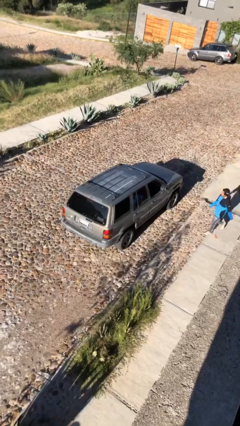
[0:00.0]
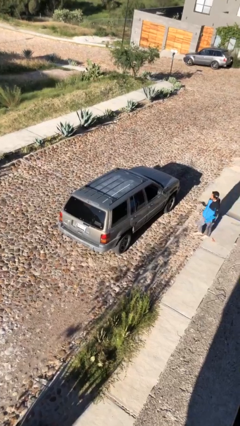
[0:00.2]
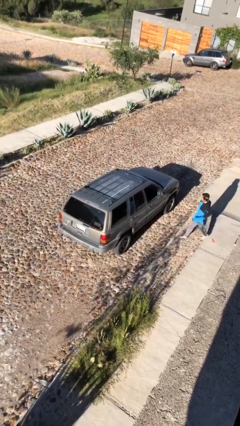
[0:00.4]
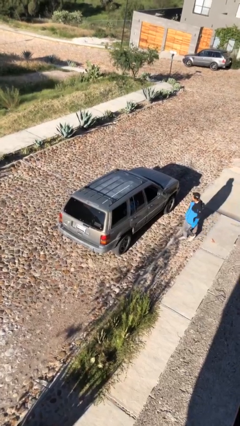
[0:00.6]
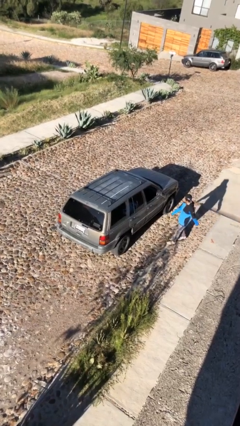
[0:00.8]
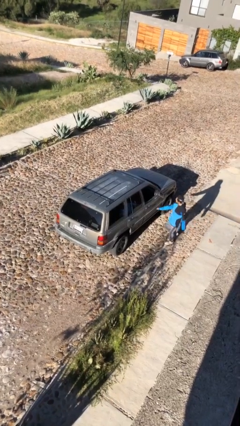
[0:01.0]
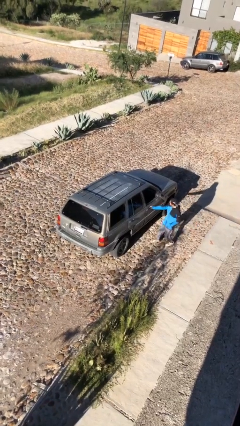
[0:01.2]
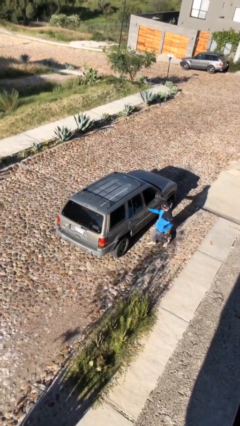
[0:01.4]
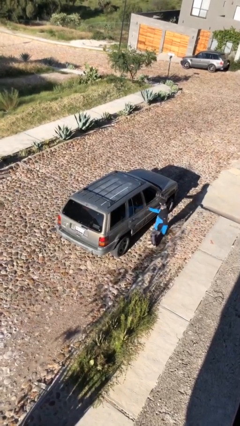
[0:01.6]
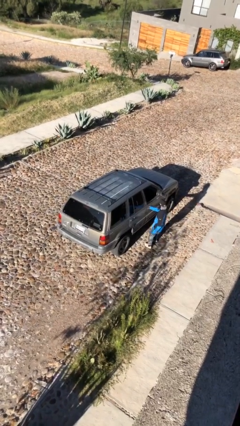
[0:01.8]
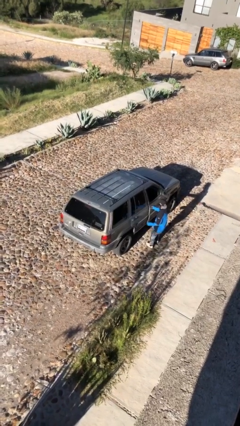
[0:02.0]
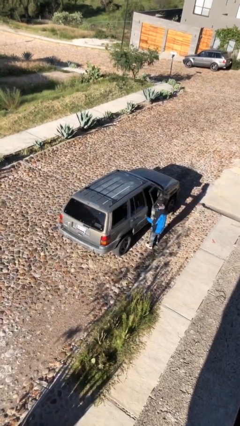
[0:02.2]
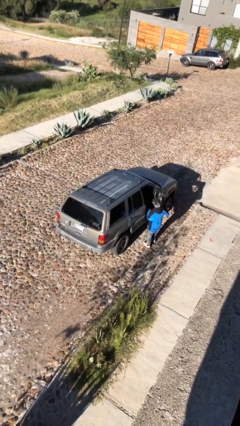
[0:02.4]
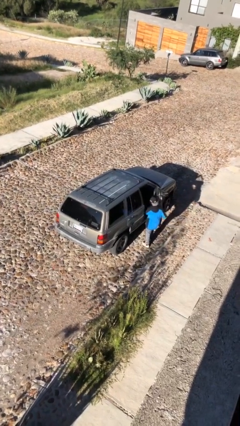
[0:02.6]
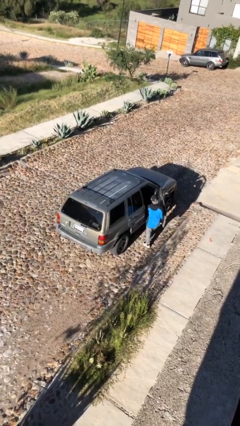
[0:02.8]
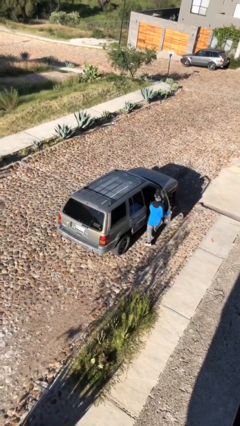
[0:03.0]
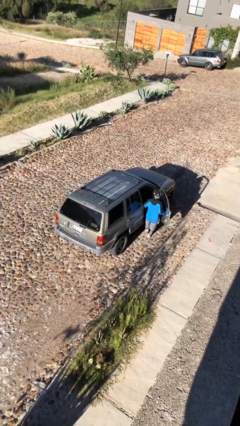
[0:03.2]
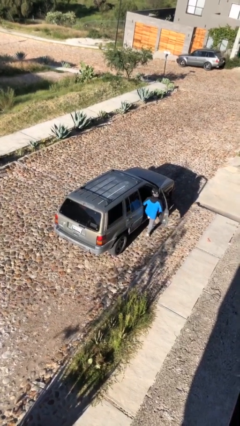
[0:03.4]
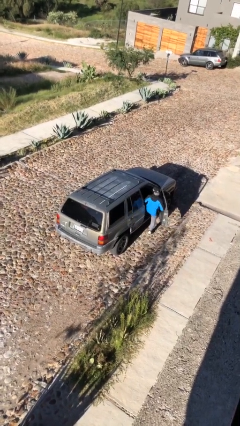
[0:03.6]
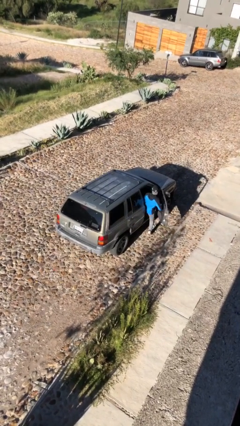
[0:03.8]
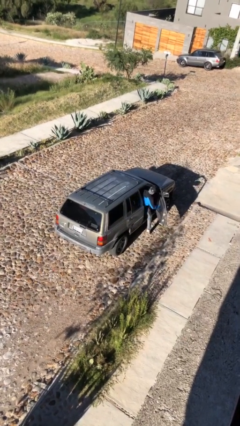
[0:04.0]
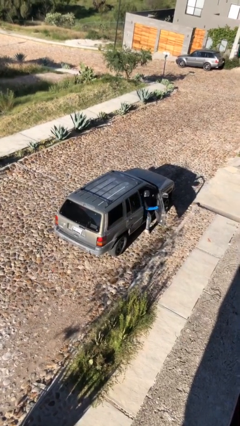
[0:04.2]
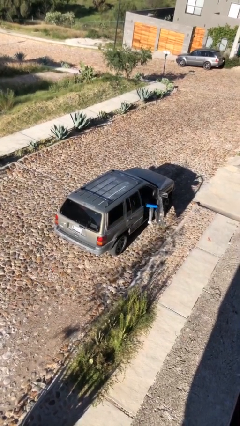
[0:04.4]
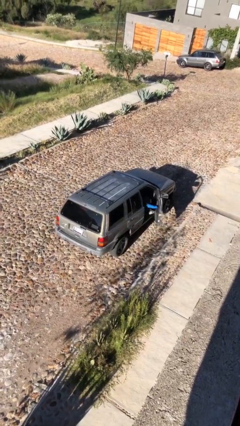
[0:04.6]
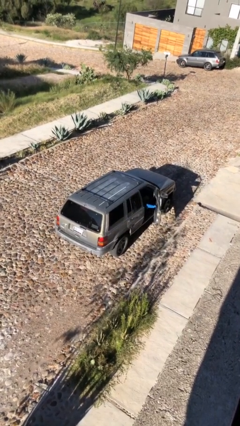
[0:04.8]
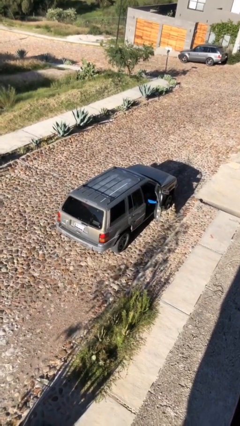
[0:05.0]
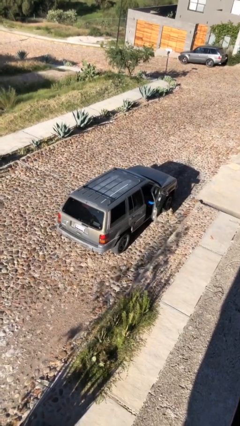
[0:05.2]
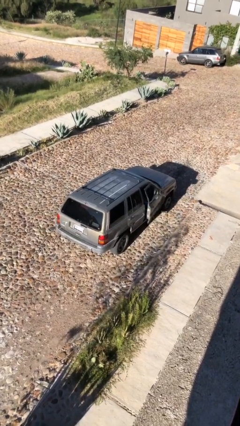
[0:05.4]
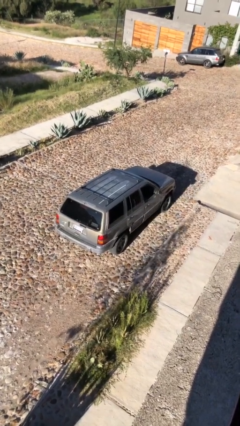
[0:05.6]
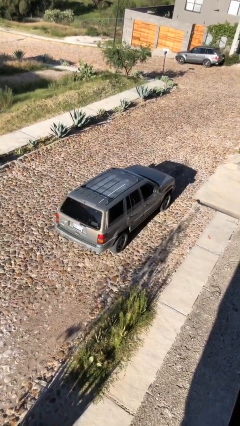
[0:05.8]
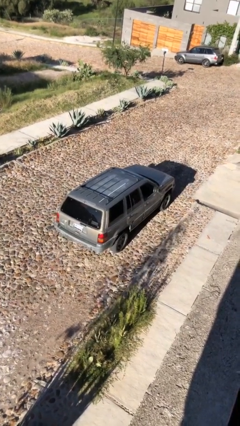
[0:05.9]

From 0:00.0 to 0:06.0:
car picks up person

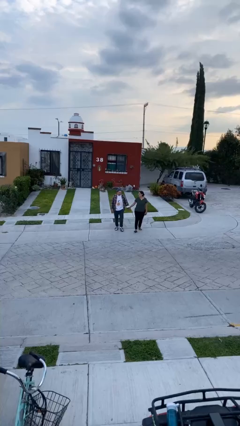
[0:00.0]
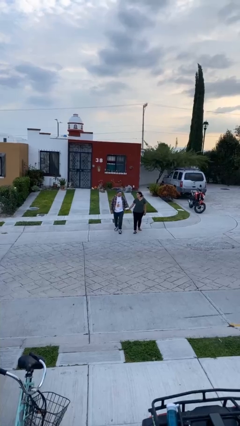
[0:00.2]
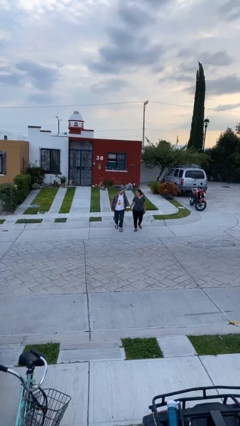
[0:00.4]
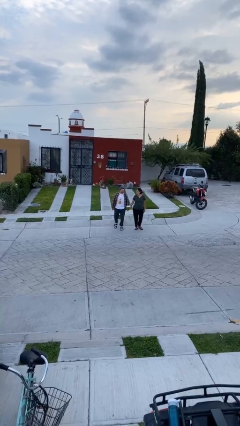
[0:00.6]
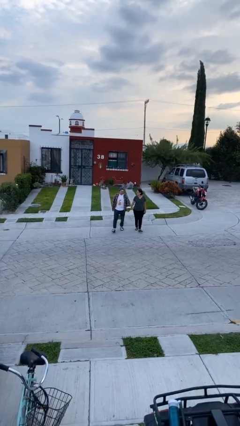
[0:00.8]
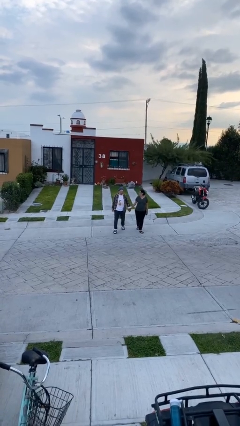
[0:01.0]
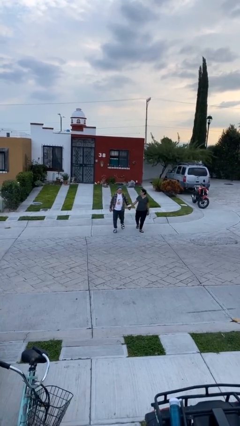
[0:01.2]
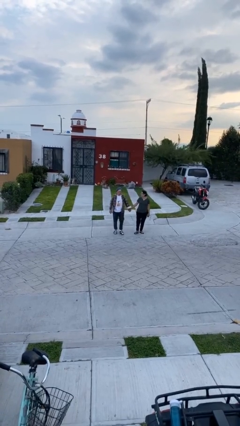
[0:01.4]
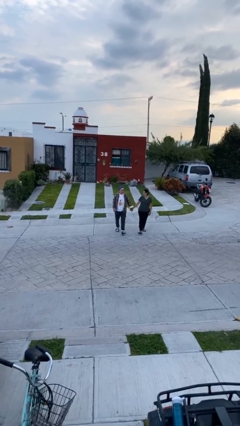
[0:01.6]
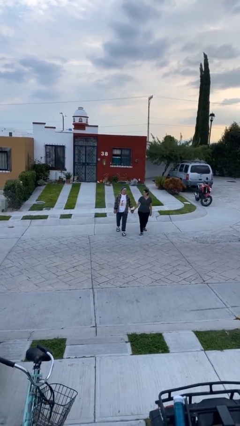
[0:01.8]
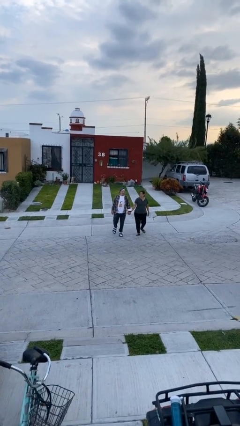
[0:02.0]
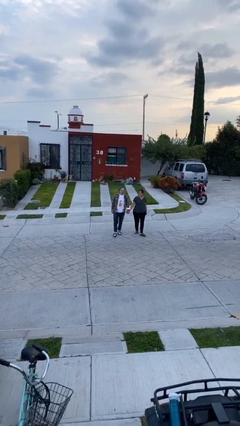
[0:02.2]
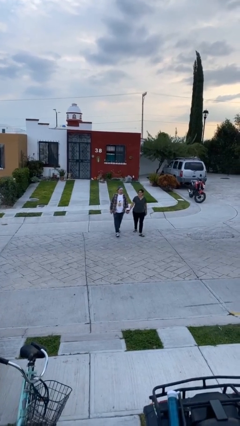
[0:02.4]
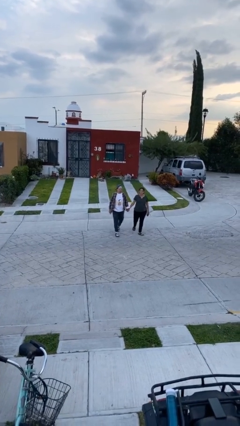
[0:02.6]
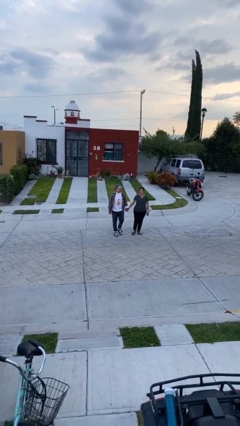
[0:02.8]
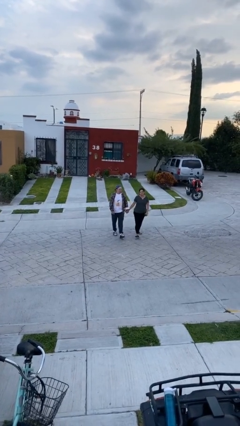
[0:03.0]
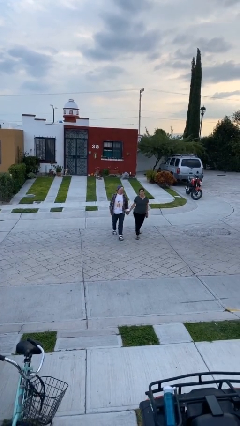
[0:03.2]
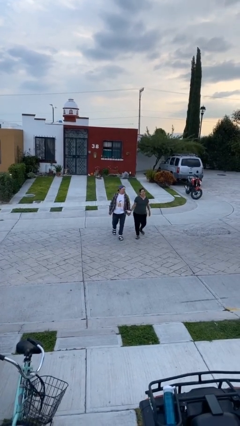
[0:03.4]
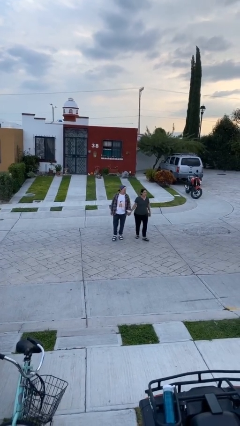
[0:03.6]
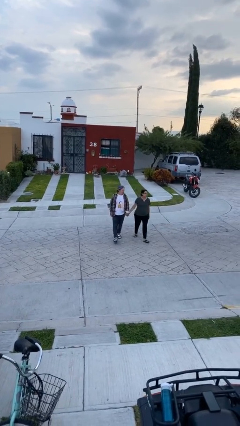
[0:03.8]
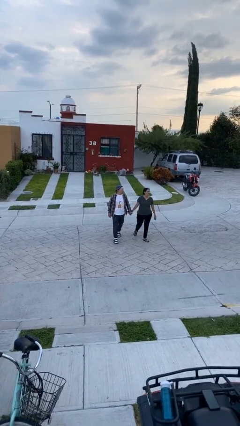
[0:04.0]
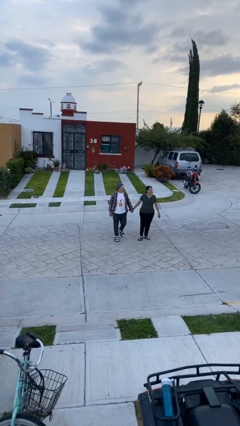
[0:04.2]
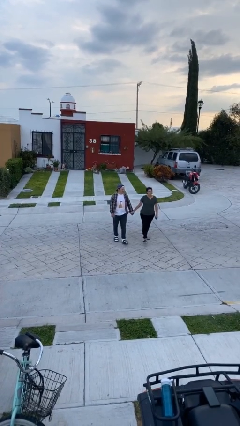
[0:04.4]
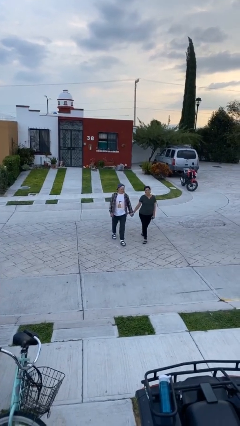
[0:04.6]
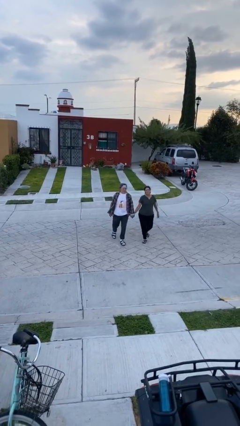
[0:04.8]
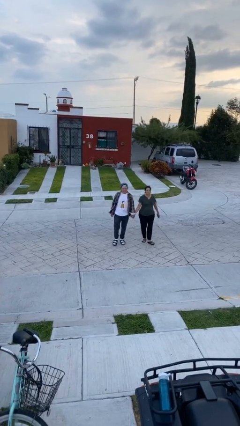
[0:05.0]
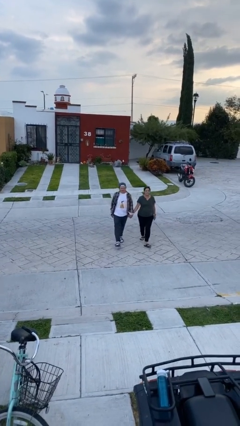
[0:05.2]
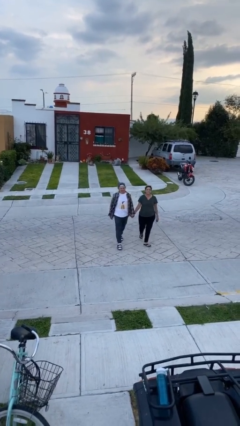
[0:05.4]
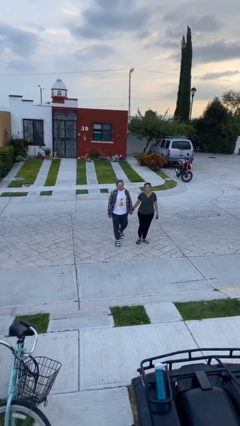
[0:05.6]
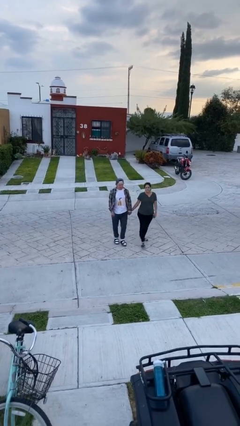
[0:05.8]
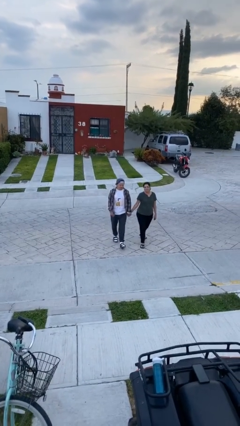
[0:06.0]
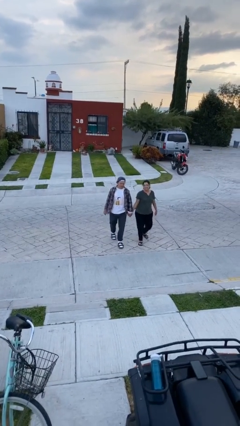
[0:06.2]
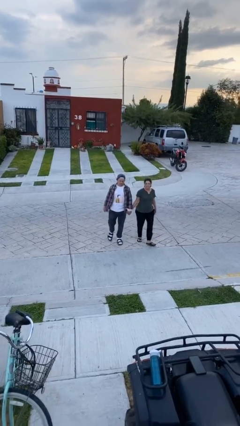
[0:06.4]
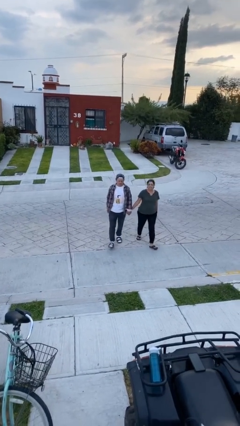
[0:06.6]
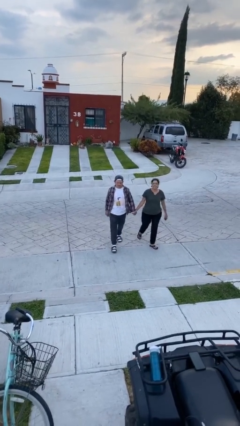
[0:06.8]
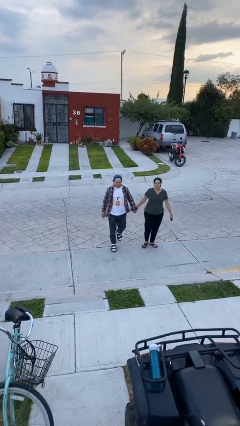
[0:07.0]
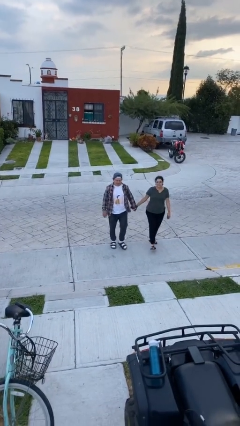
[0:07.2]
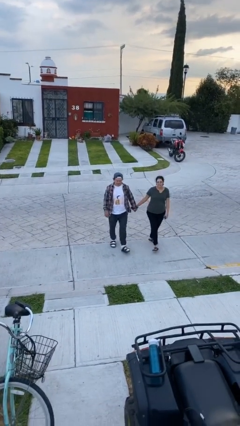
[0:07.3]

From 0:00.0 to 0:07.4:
person holds hand

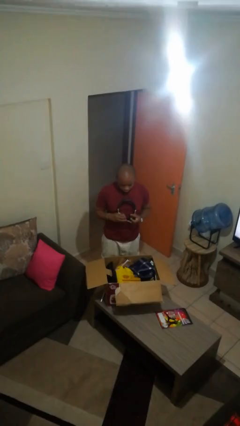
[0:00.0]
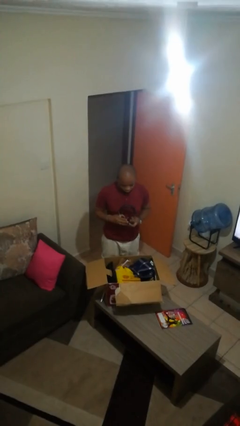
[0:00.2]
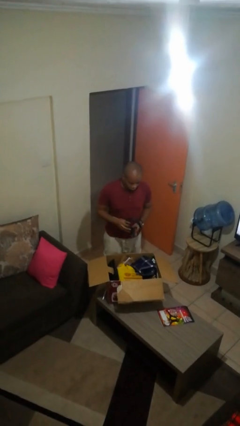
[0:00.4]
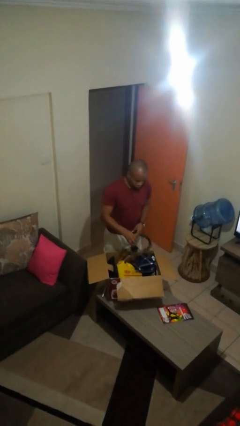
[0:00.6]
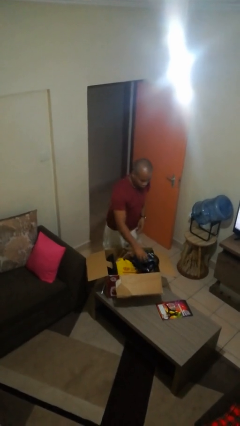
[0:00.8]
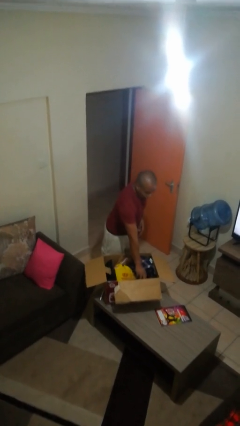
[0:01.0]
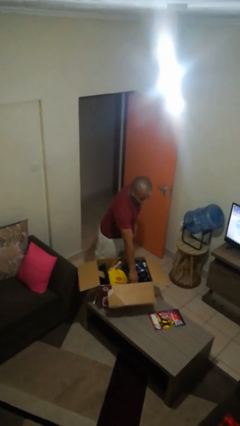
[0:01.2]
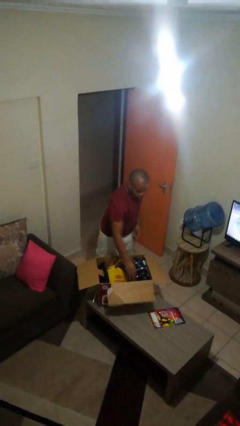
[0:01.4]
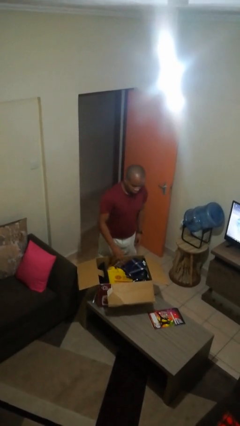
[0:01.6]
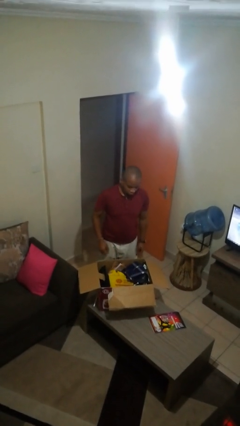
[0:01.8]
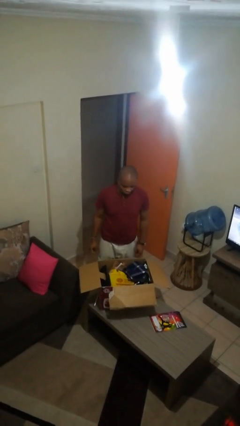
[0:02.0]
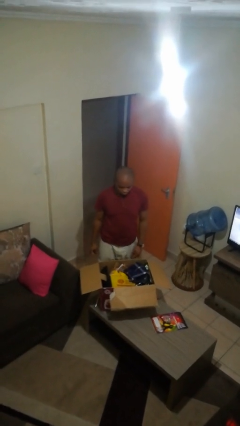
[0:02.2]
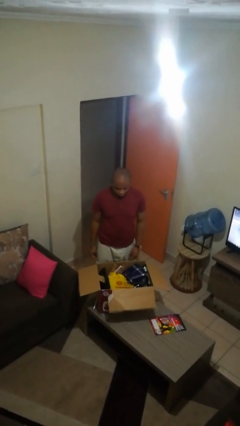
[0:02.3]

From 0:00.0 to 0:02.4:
person puts object into box

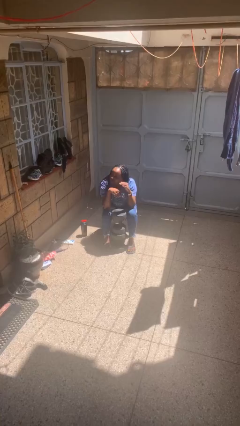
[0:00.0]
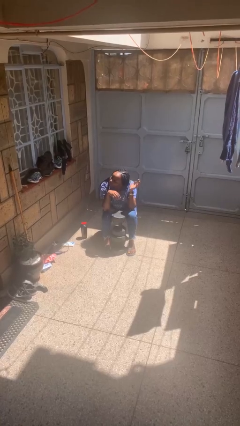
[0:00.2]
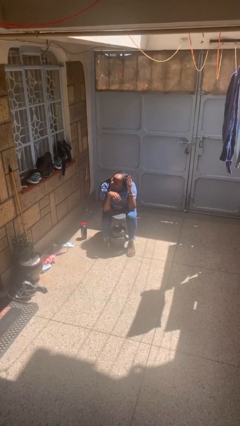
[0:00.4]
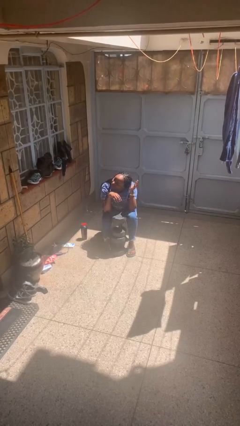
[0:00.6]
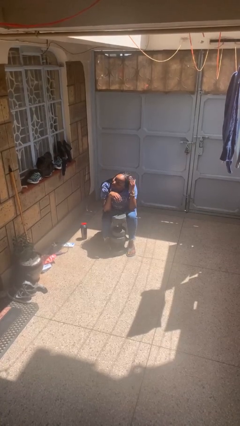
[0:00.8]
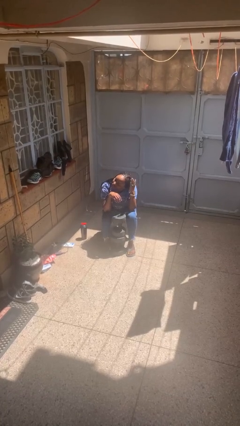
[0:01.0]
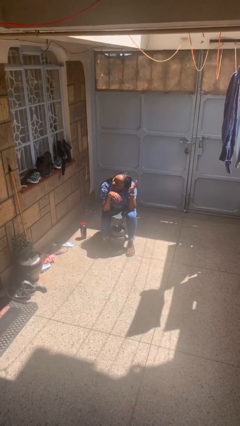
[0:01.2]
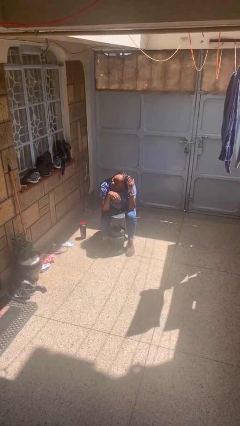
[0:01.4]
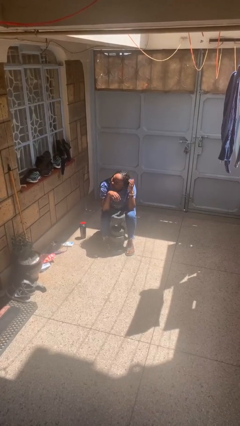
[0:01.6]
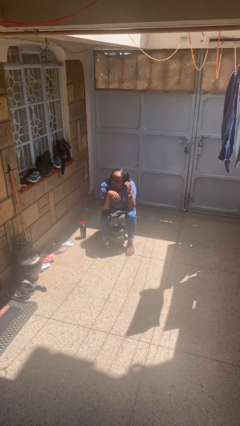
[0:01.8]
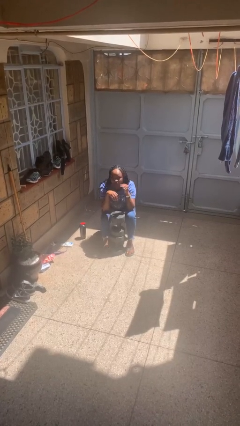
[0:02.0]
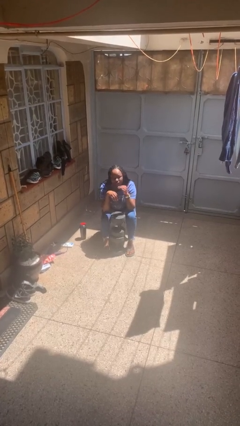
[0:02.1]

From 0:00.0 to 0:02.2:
person pats head
